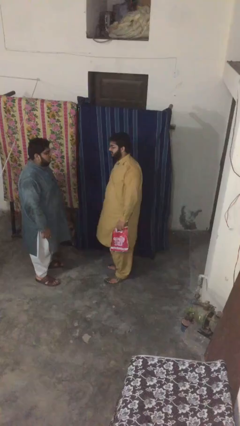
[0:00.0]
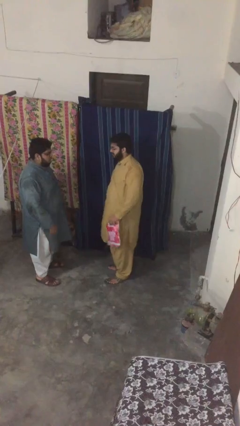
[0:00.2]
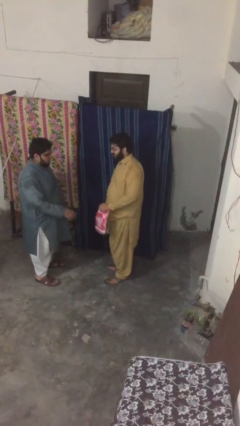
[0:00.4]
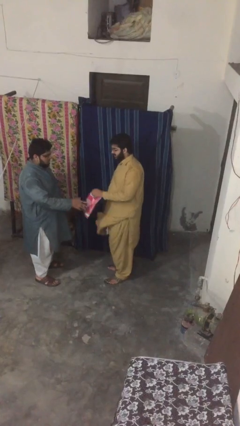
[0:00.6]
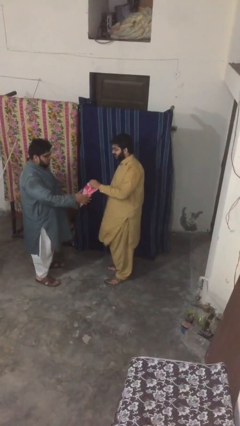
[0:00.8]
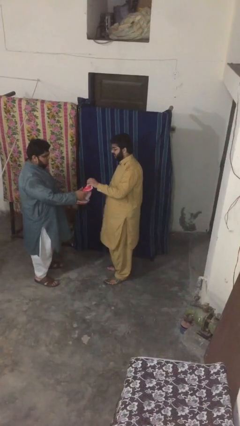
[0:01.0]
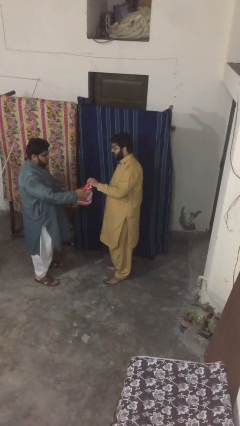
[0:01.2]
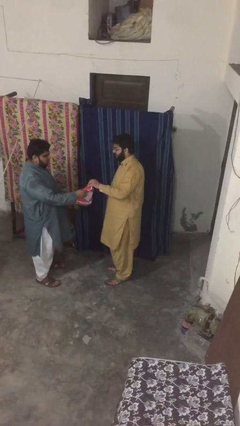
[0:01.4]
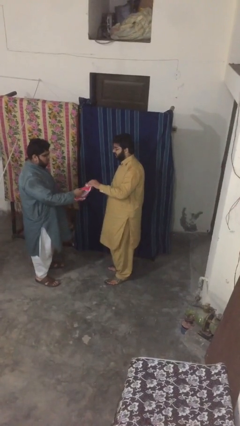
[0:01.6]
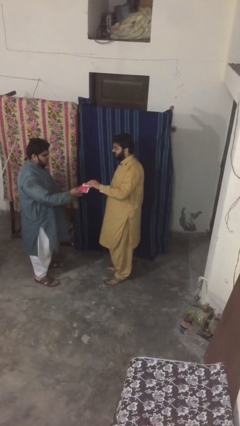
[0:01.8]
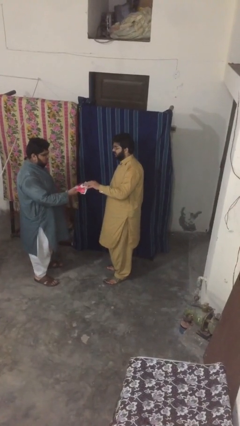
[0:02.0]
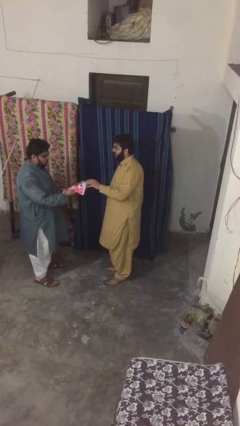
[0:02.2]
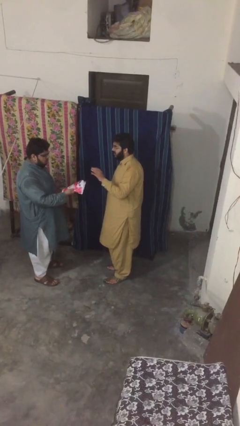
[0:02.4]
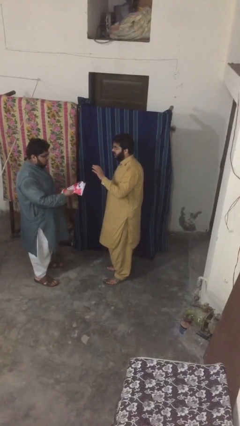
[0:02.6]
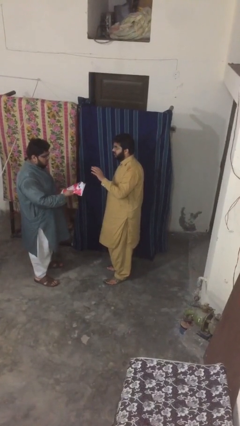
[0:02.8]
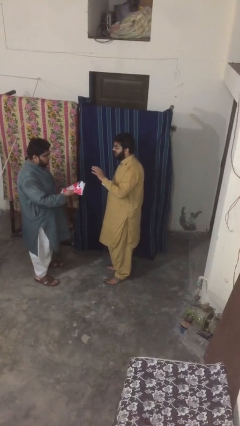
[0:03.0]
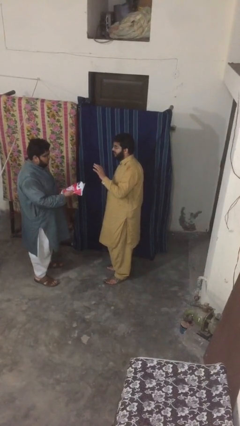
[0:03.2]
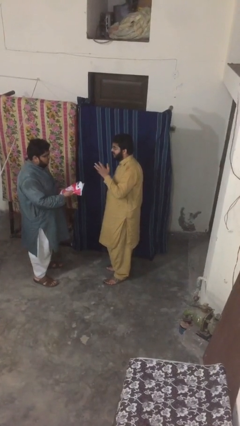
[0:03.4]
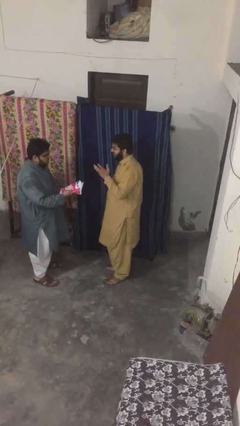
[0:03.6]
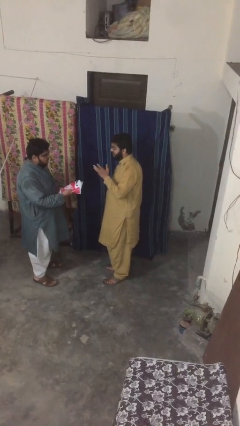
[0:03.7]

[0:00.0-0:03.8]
person transfers object to person

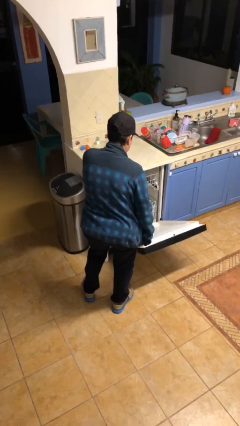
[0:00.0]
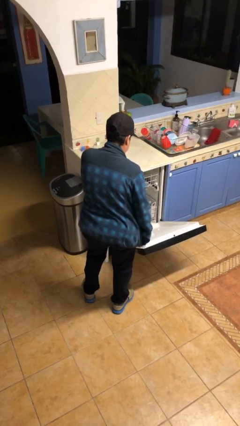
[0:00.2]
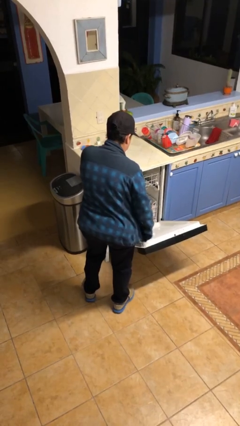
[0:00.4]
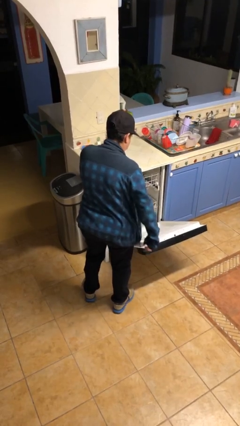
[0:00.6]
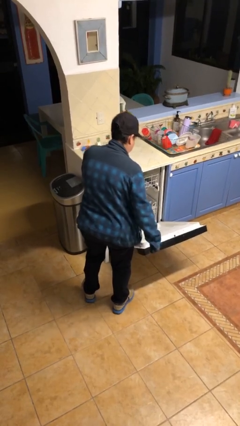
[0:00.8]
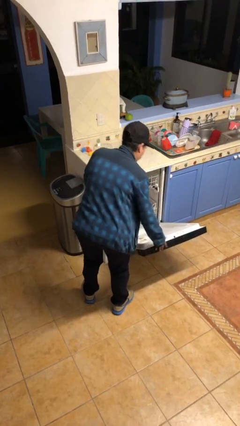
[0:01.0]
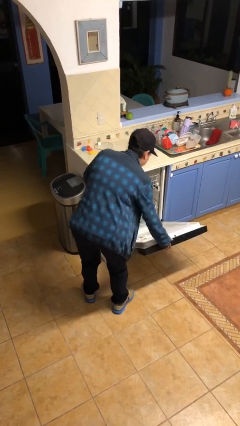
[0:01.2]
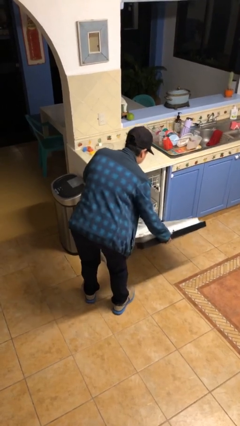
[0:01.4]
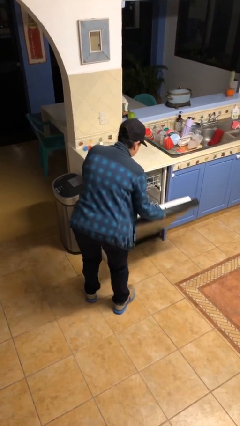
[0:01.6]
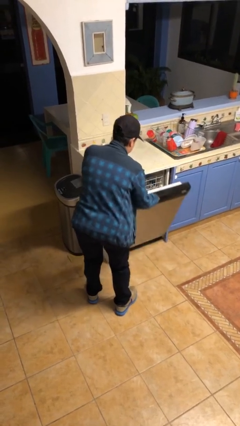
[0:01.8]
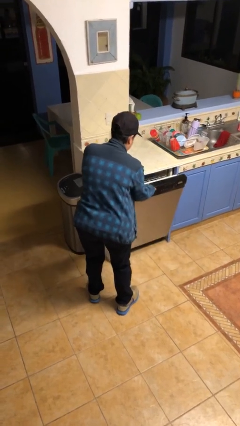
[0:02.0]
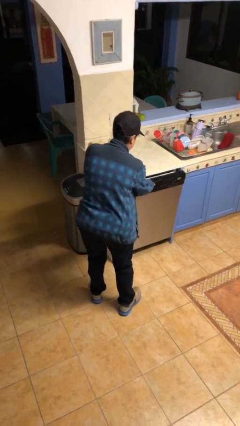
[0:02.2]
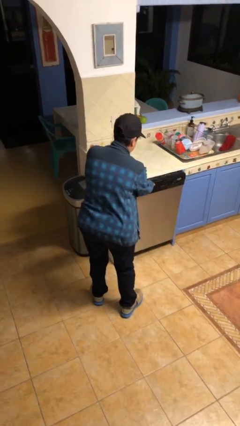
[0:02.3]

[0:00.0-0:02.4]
person closes dishwasher

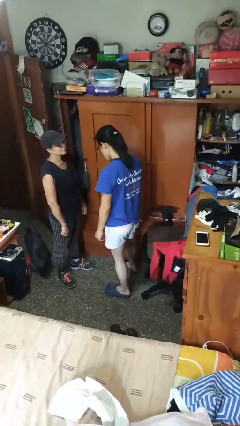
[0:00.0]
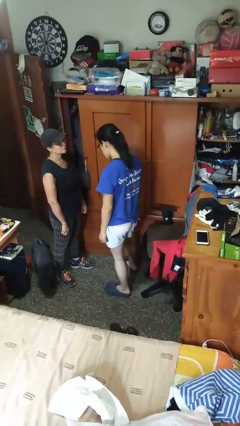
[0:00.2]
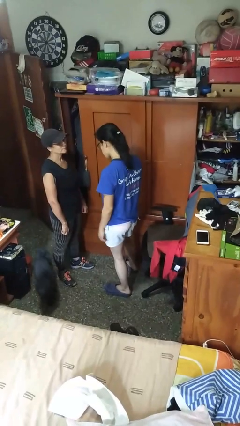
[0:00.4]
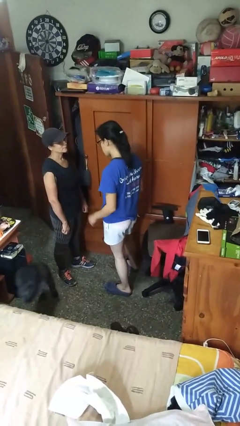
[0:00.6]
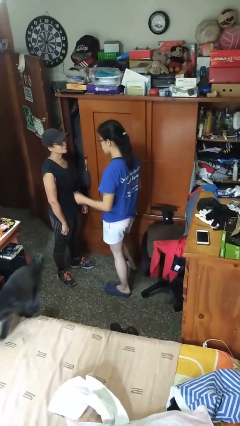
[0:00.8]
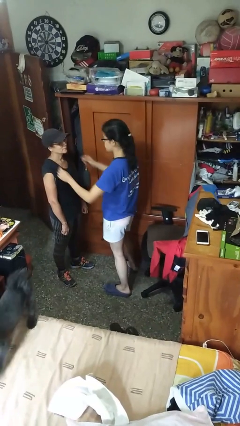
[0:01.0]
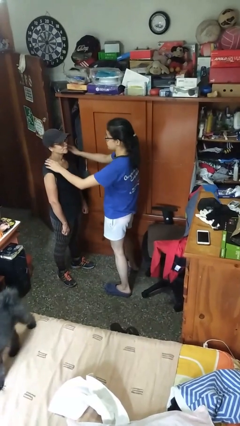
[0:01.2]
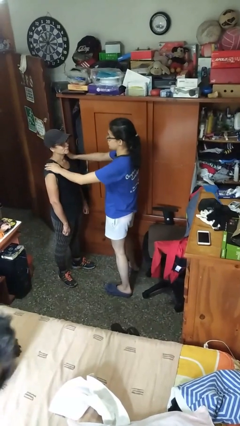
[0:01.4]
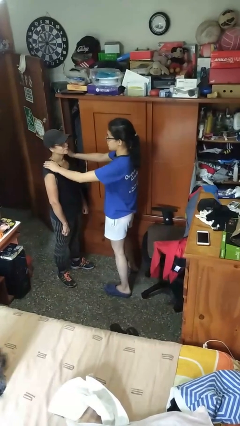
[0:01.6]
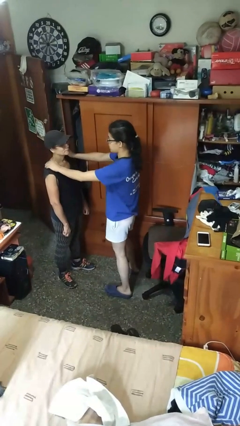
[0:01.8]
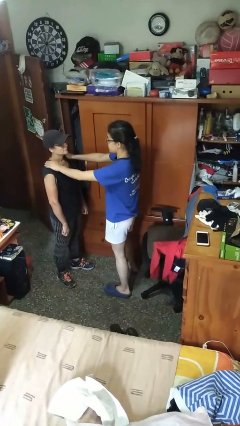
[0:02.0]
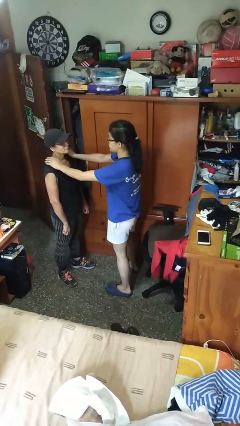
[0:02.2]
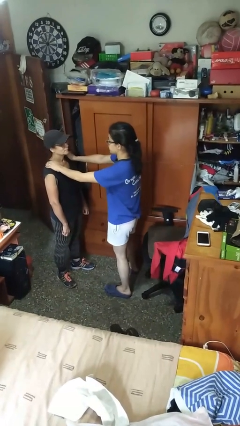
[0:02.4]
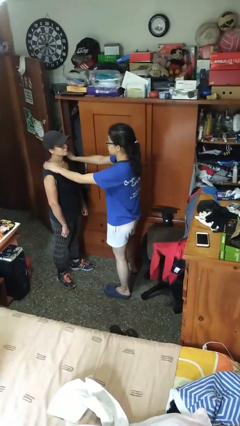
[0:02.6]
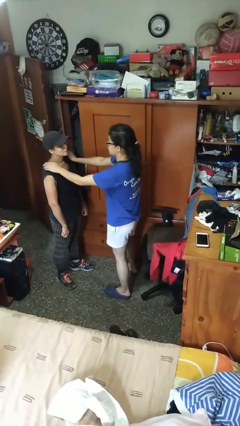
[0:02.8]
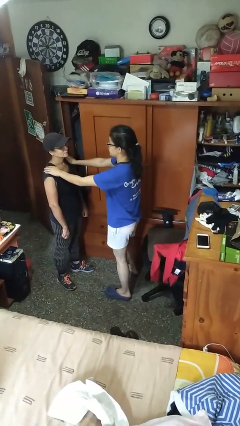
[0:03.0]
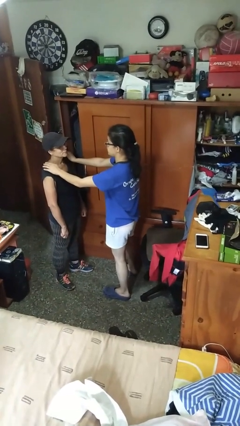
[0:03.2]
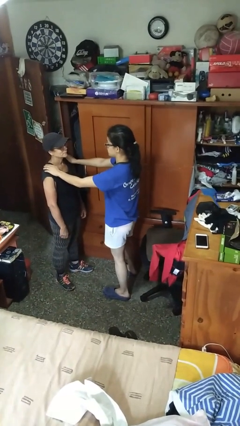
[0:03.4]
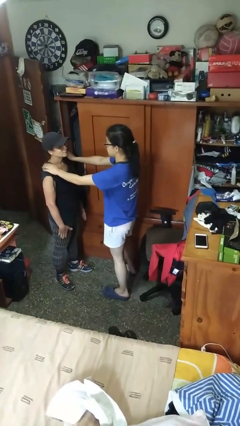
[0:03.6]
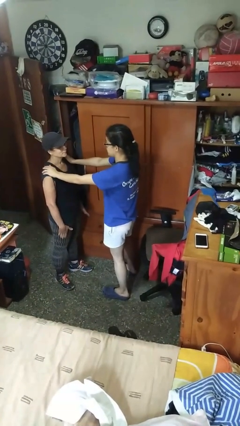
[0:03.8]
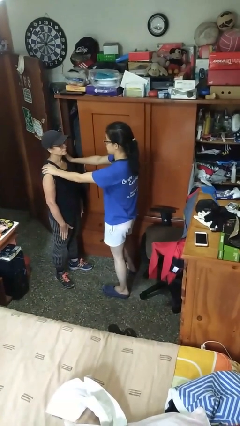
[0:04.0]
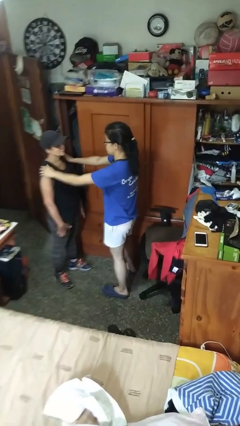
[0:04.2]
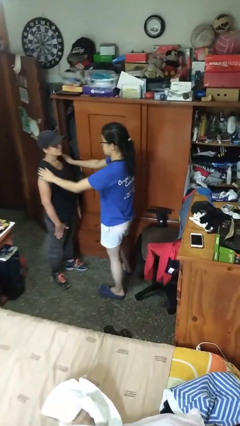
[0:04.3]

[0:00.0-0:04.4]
person pounds shoulders of person

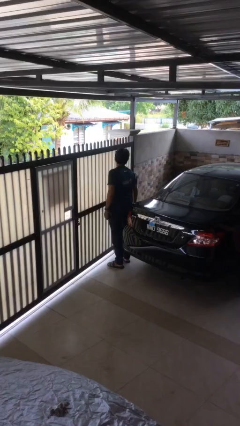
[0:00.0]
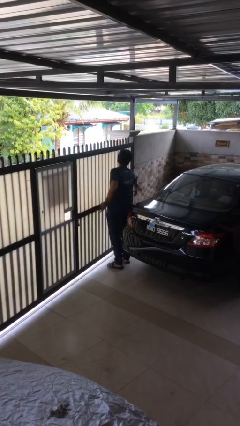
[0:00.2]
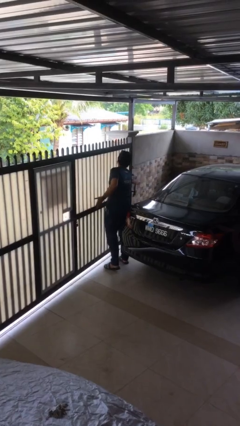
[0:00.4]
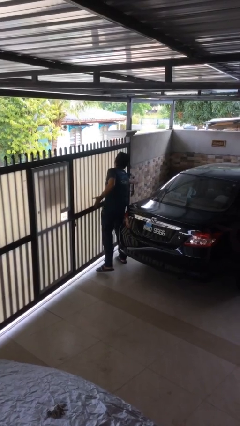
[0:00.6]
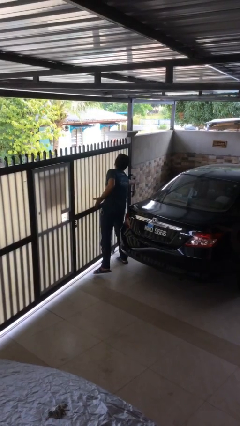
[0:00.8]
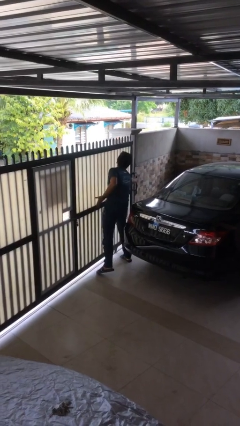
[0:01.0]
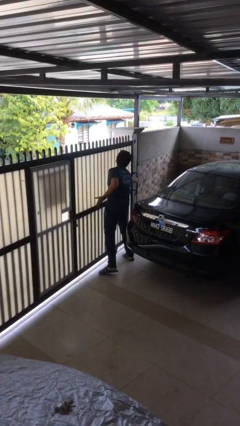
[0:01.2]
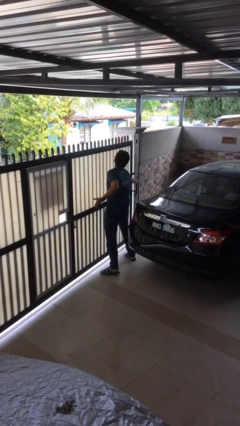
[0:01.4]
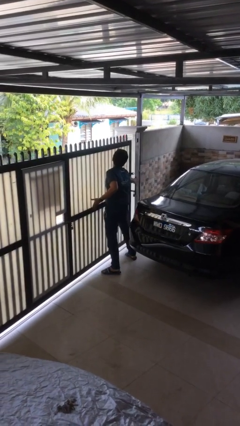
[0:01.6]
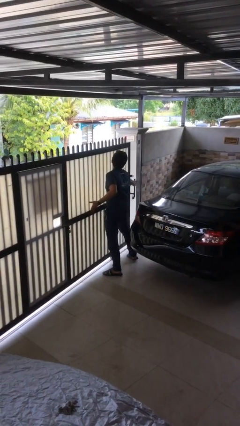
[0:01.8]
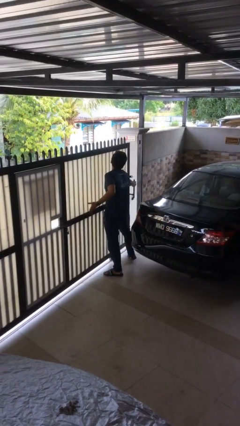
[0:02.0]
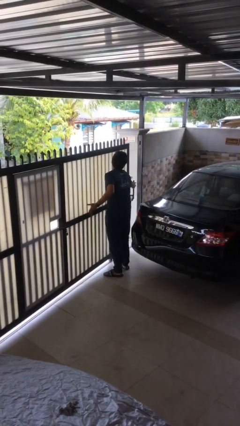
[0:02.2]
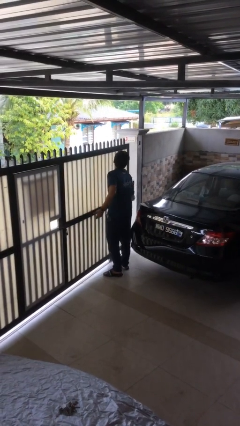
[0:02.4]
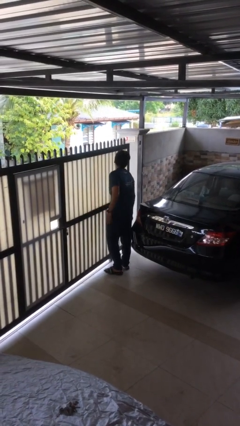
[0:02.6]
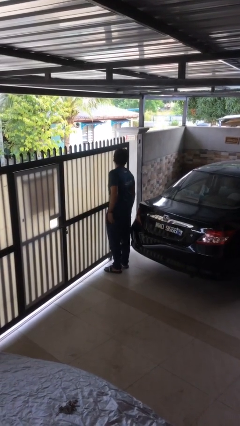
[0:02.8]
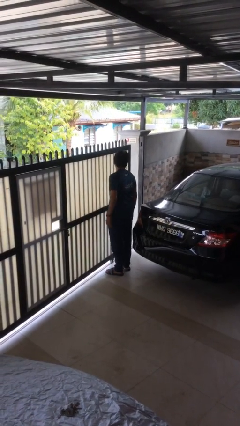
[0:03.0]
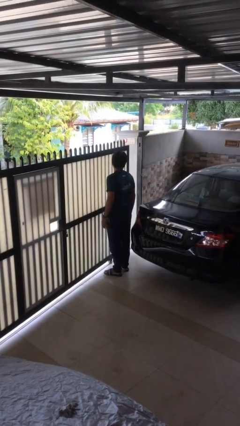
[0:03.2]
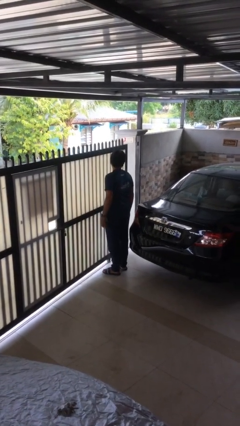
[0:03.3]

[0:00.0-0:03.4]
person opens sliding door

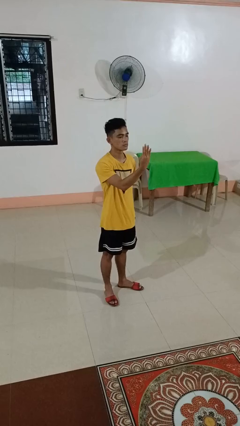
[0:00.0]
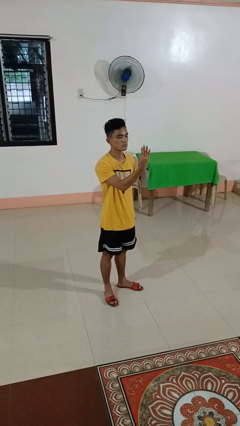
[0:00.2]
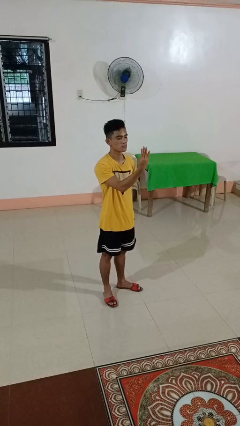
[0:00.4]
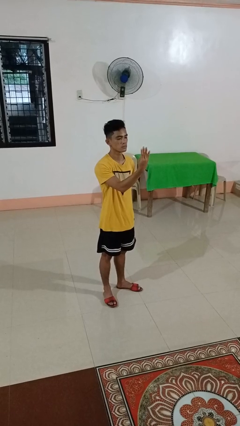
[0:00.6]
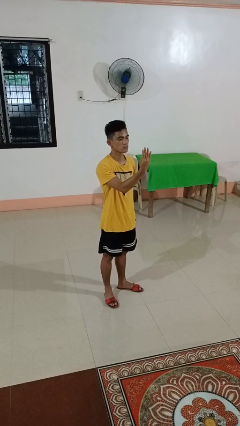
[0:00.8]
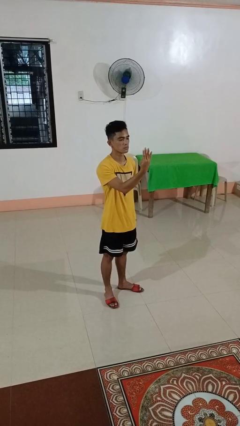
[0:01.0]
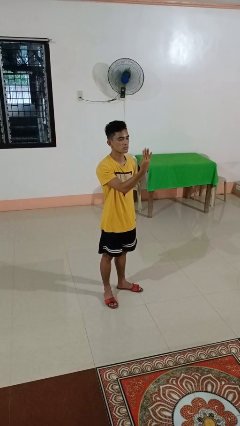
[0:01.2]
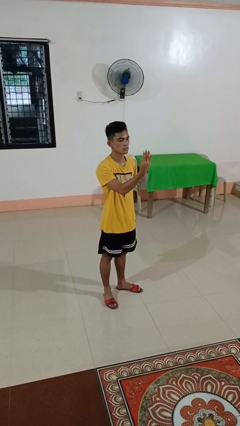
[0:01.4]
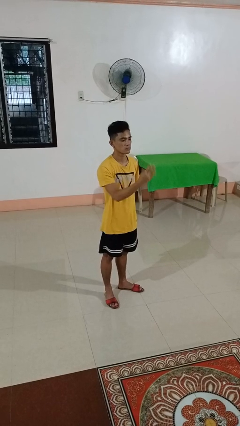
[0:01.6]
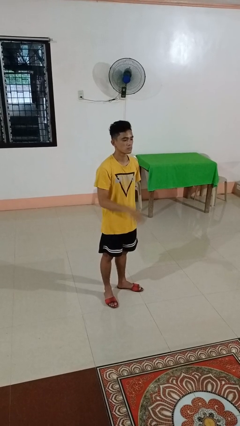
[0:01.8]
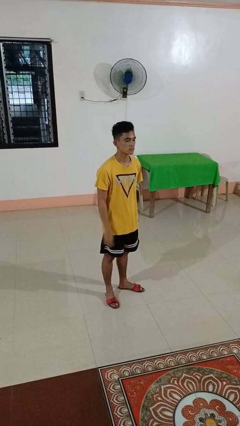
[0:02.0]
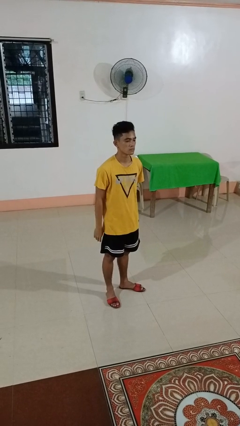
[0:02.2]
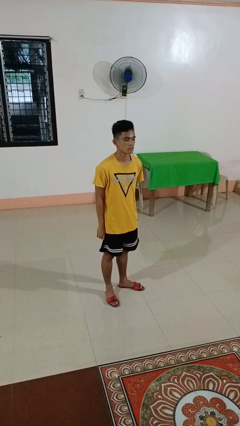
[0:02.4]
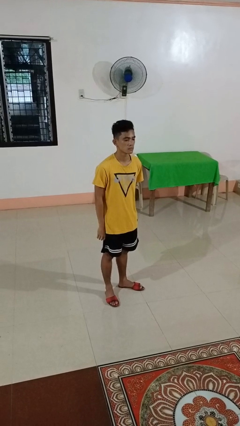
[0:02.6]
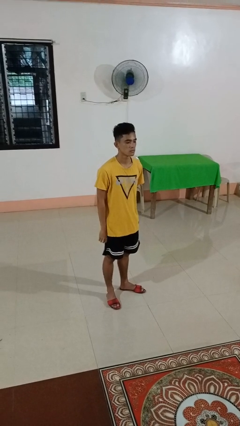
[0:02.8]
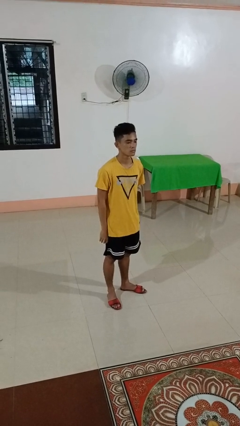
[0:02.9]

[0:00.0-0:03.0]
person gestures number four

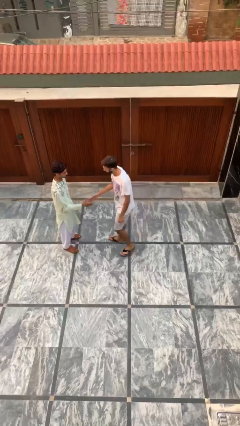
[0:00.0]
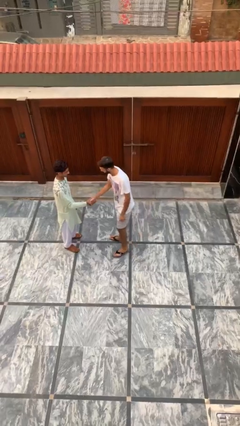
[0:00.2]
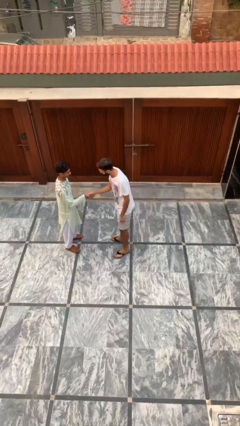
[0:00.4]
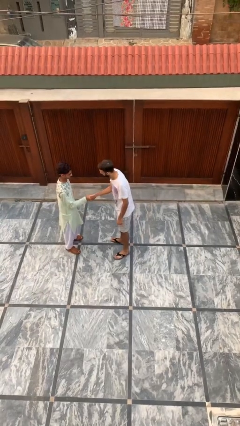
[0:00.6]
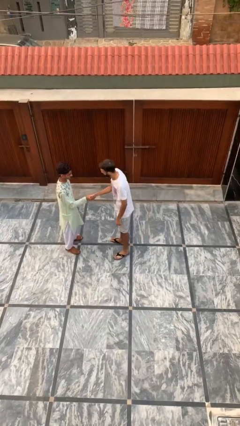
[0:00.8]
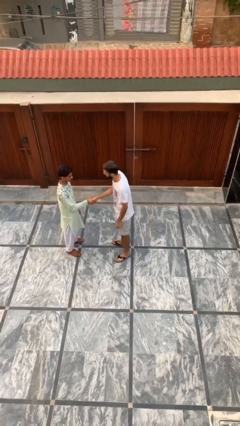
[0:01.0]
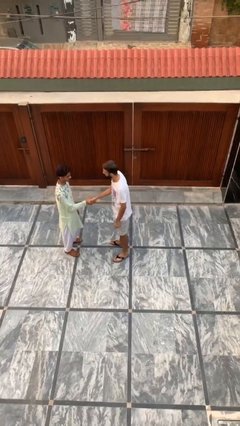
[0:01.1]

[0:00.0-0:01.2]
person shakes hand
